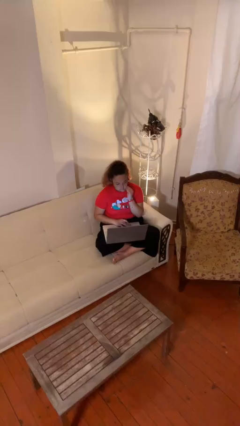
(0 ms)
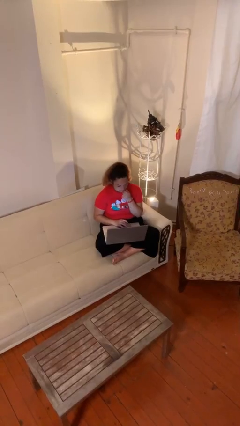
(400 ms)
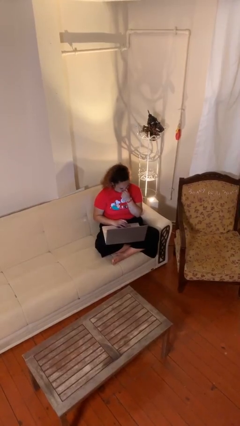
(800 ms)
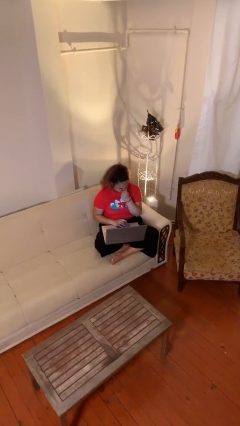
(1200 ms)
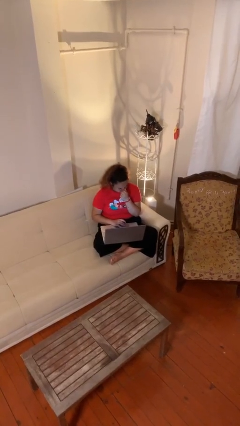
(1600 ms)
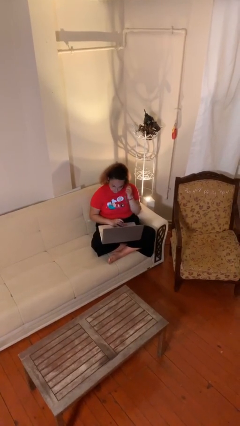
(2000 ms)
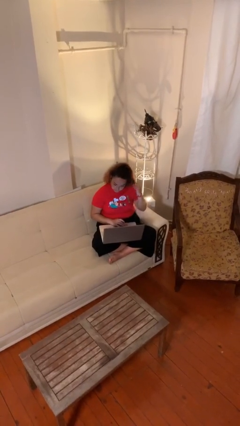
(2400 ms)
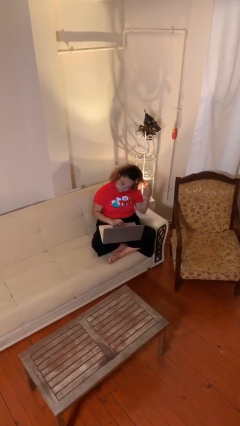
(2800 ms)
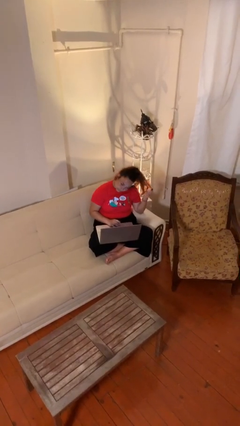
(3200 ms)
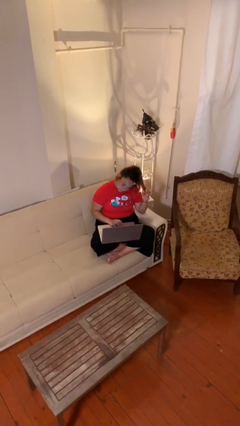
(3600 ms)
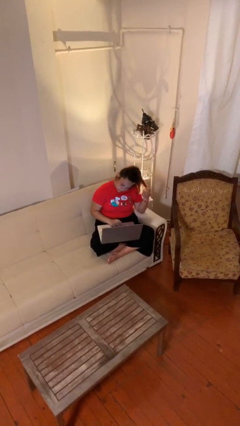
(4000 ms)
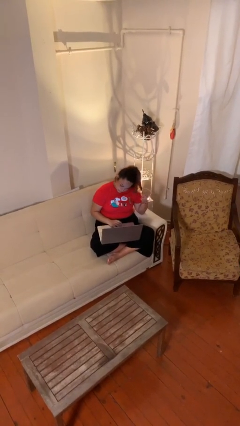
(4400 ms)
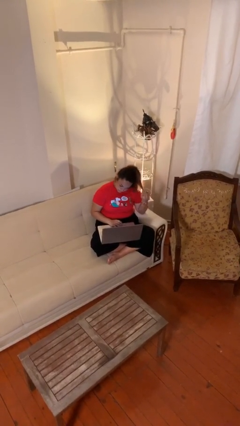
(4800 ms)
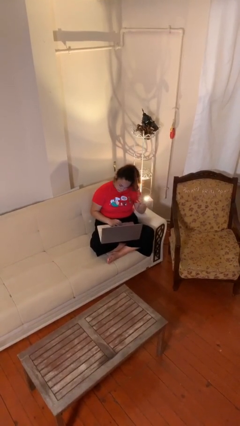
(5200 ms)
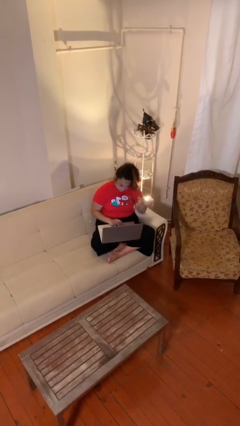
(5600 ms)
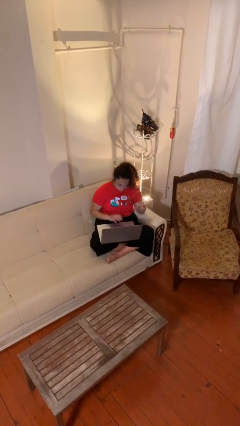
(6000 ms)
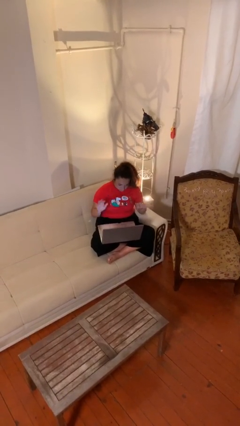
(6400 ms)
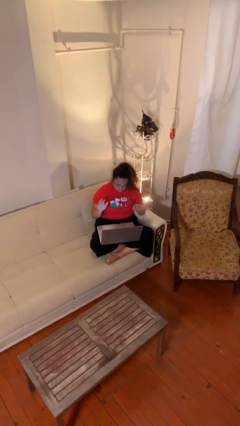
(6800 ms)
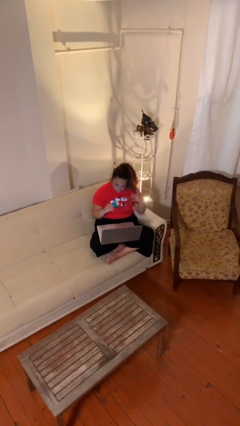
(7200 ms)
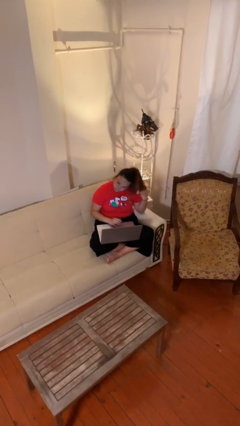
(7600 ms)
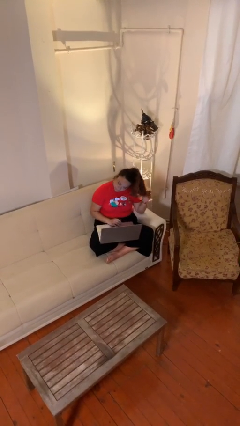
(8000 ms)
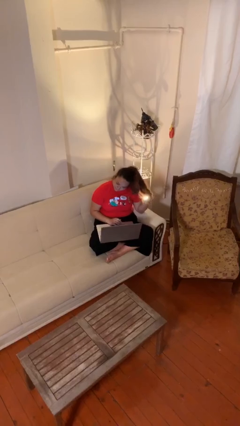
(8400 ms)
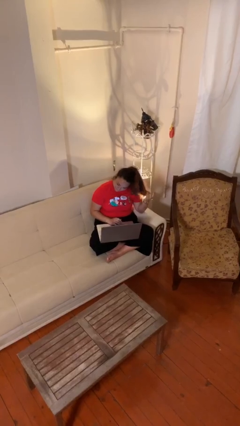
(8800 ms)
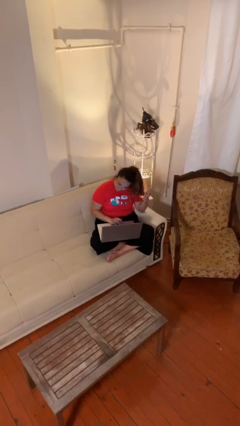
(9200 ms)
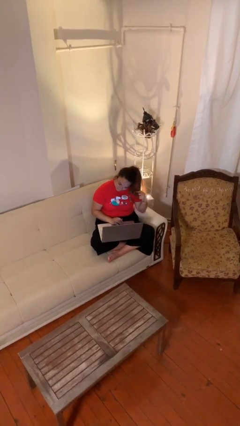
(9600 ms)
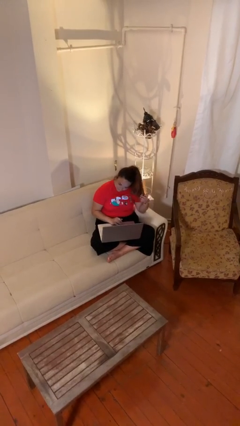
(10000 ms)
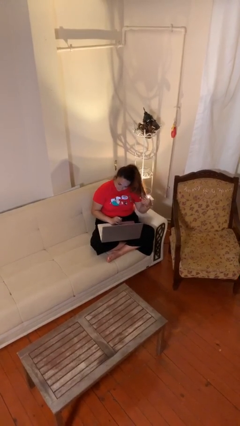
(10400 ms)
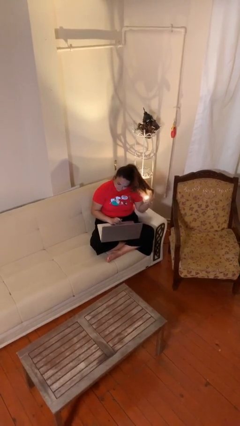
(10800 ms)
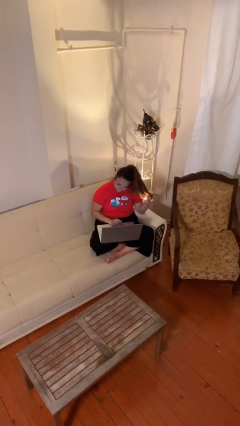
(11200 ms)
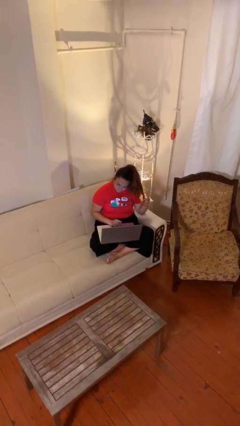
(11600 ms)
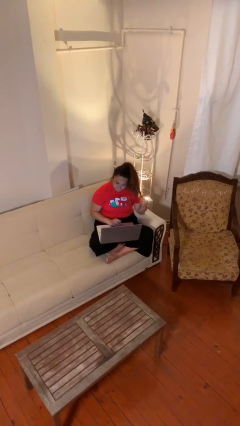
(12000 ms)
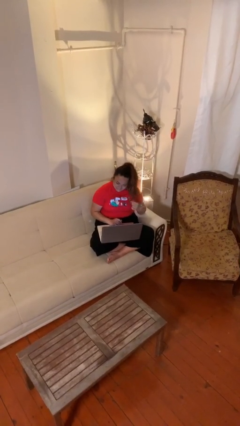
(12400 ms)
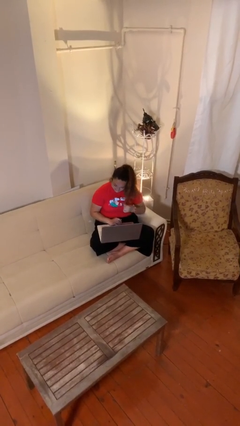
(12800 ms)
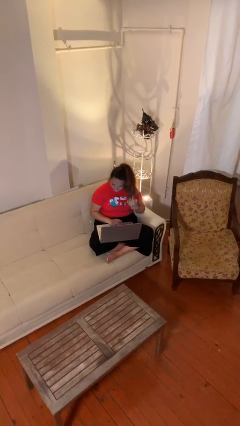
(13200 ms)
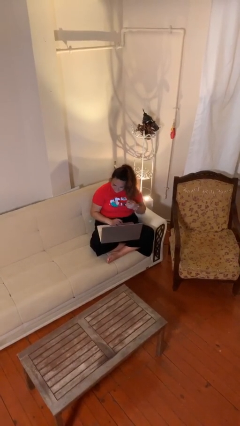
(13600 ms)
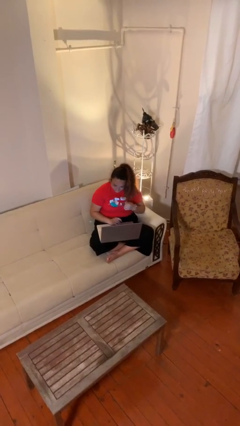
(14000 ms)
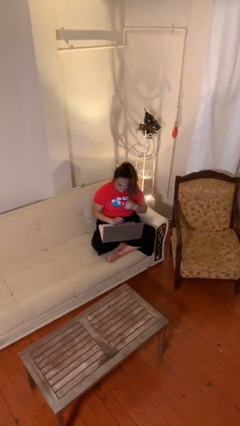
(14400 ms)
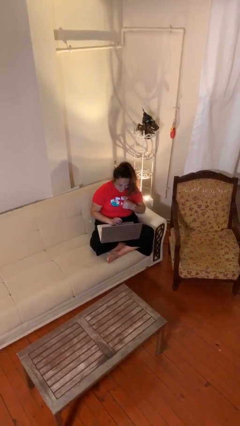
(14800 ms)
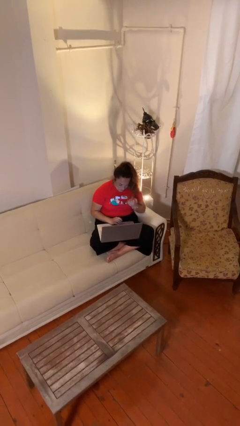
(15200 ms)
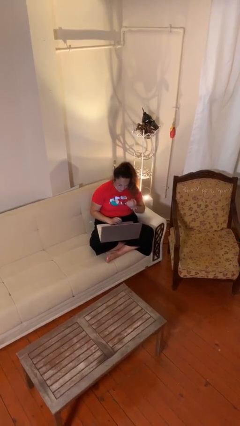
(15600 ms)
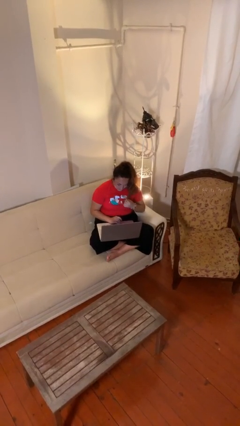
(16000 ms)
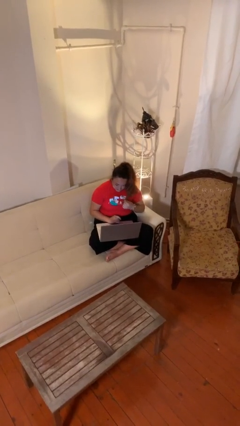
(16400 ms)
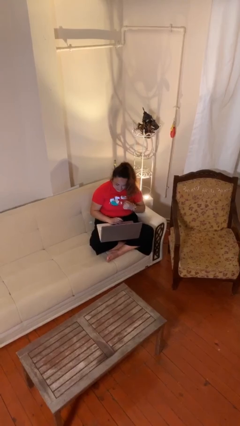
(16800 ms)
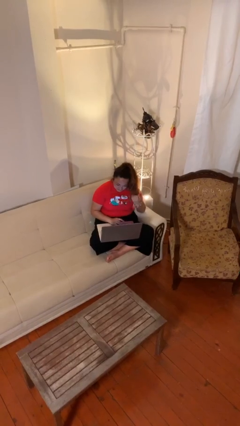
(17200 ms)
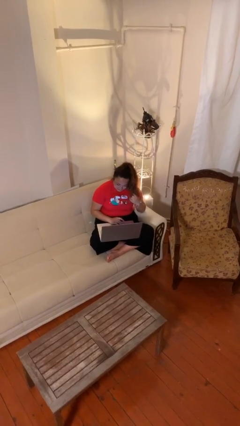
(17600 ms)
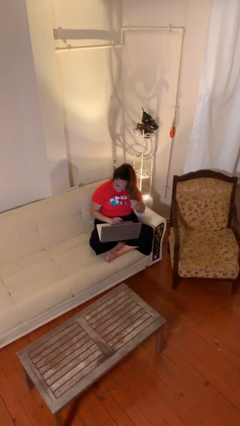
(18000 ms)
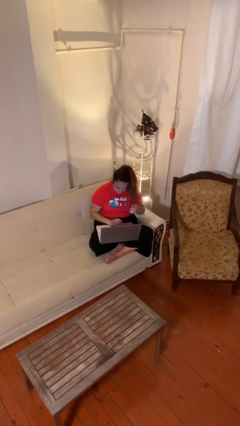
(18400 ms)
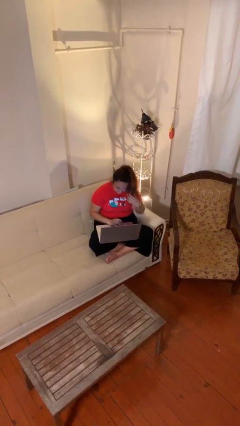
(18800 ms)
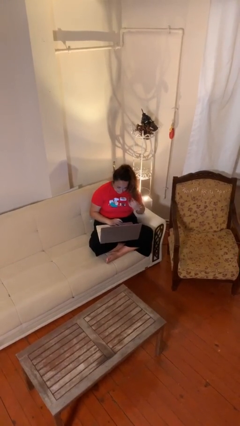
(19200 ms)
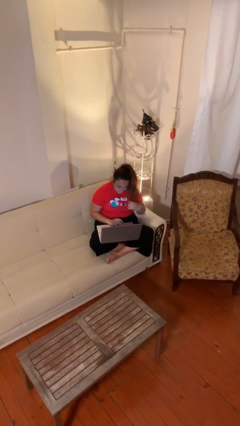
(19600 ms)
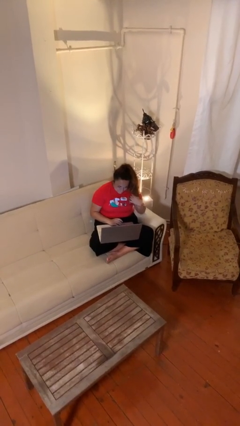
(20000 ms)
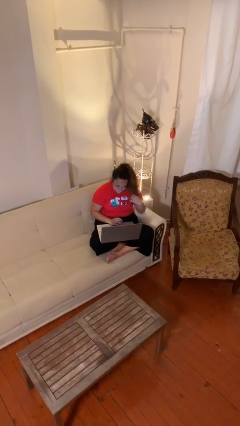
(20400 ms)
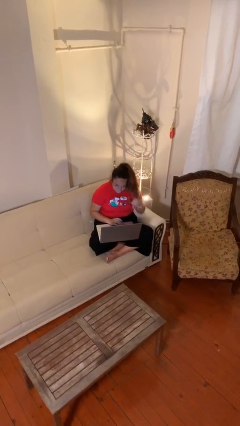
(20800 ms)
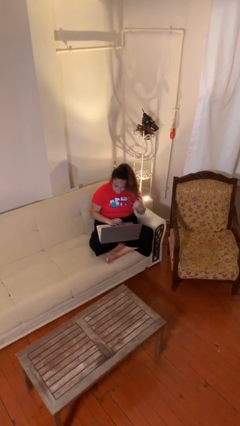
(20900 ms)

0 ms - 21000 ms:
person interacts with laptop

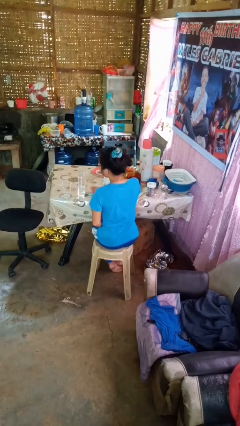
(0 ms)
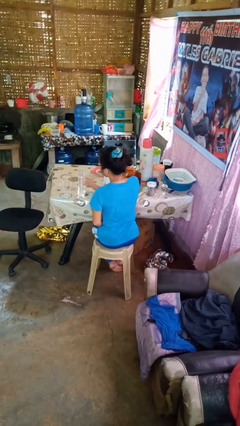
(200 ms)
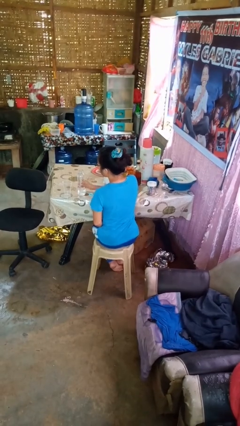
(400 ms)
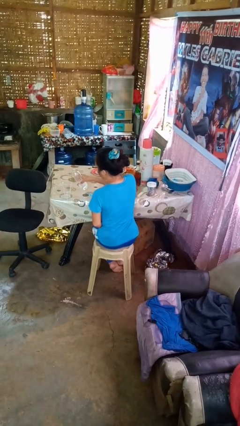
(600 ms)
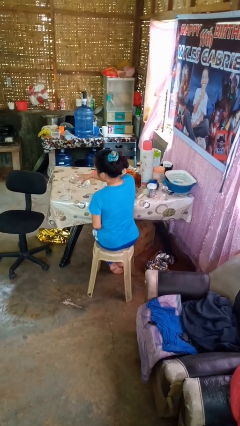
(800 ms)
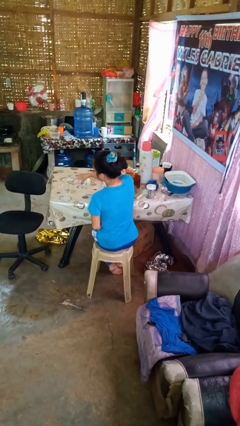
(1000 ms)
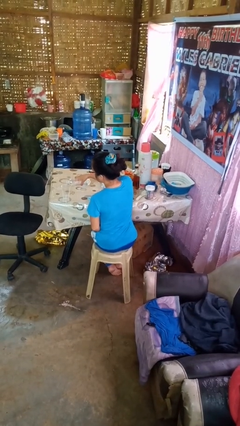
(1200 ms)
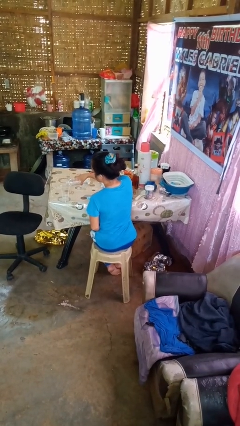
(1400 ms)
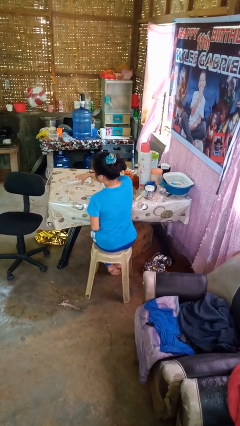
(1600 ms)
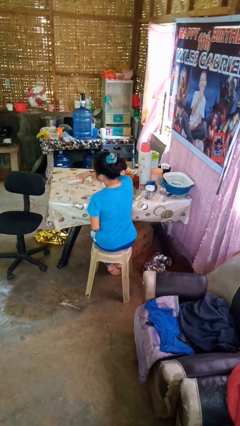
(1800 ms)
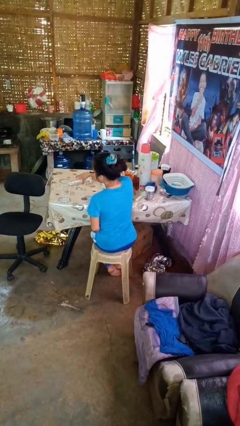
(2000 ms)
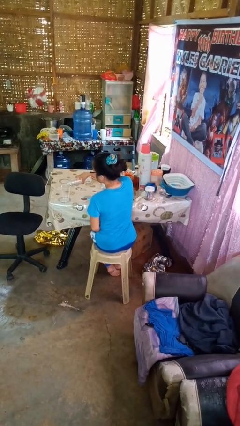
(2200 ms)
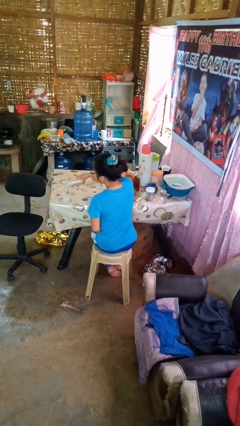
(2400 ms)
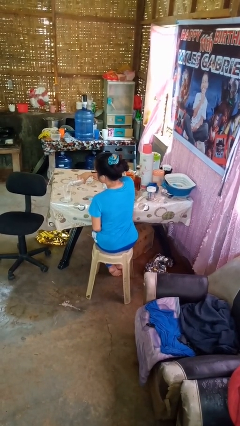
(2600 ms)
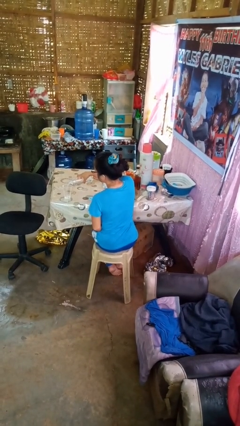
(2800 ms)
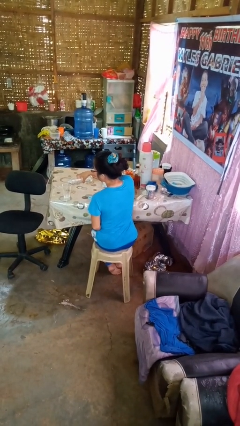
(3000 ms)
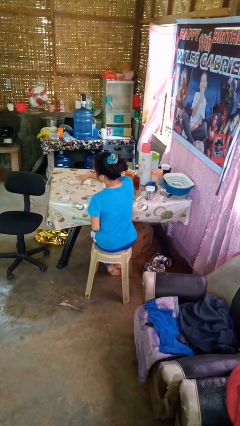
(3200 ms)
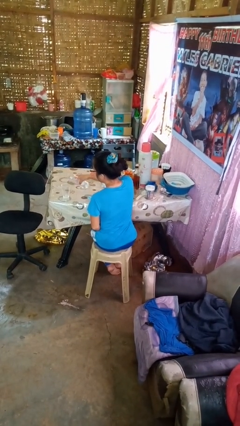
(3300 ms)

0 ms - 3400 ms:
person pours liquid into cup

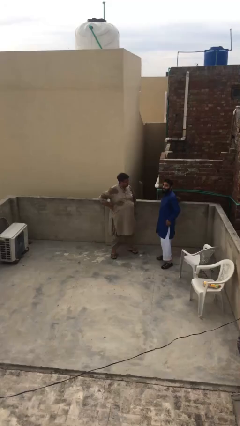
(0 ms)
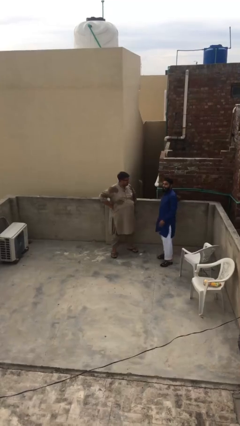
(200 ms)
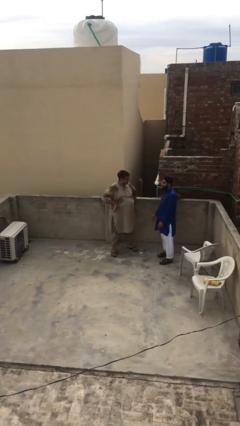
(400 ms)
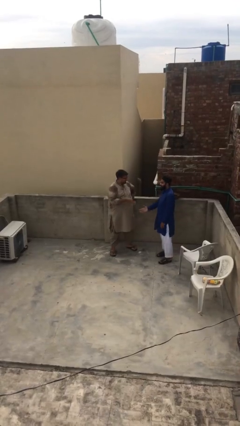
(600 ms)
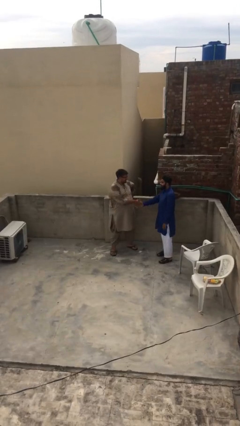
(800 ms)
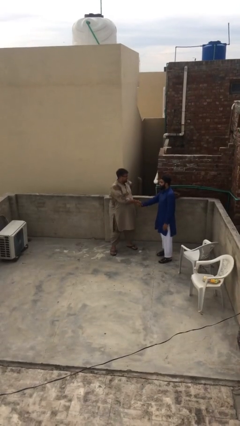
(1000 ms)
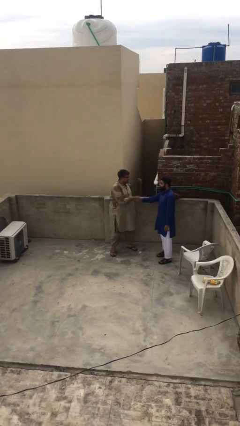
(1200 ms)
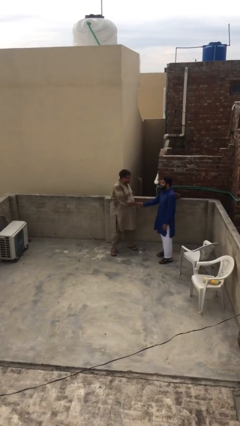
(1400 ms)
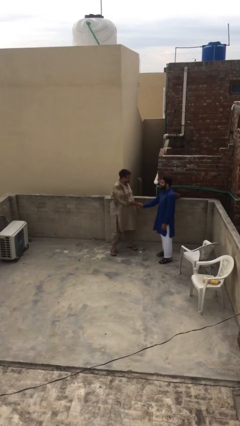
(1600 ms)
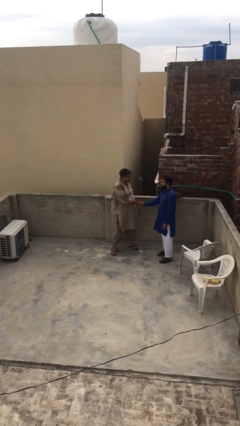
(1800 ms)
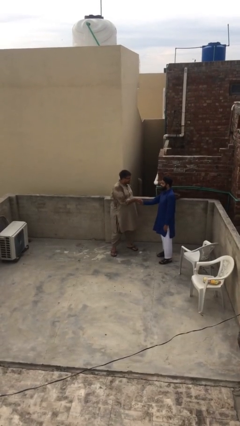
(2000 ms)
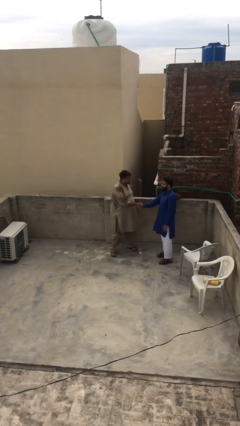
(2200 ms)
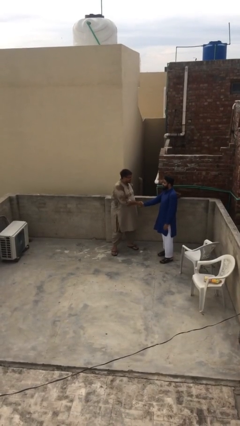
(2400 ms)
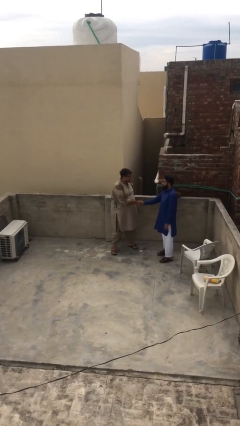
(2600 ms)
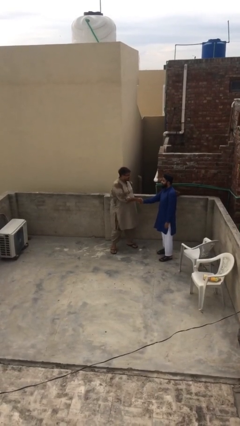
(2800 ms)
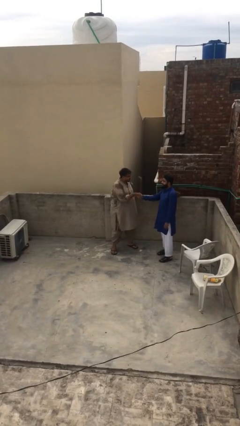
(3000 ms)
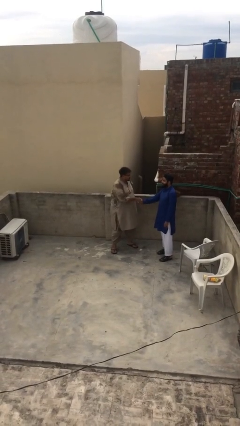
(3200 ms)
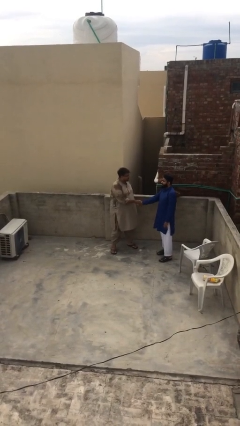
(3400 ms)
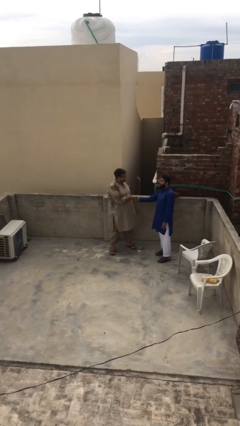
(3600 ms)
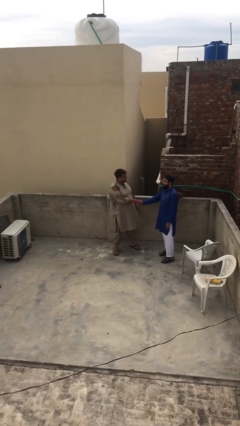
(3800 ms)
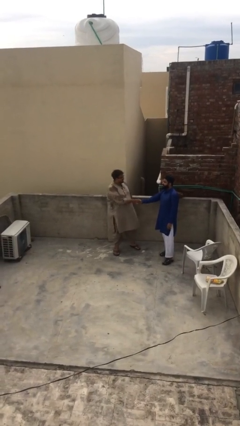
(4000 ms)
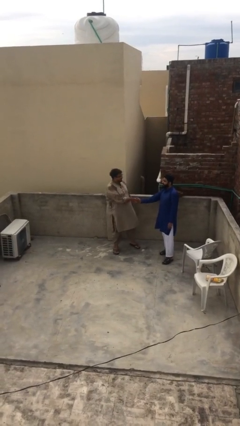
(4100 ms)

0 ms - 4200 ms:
person shakes hand

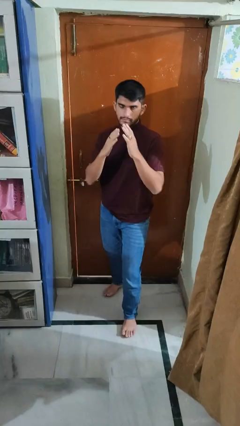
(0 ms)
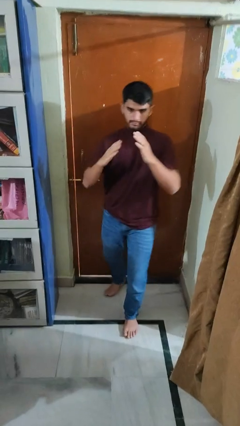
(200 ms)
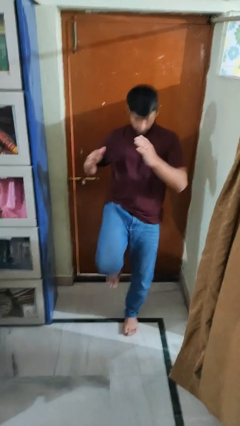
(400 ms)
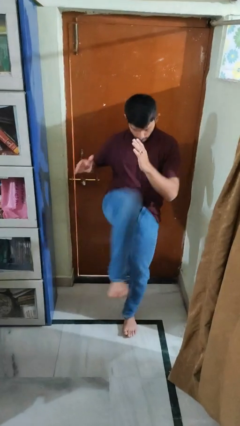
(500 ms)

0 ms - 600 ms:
person karate kicks
